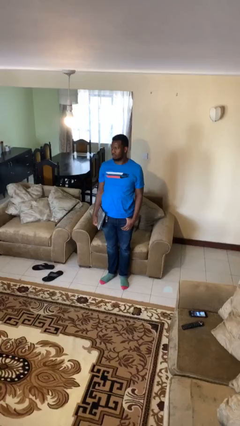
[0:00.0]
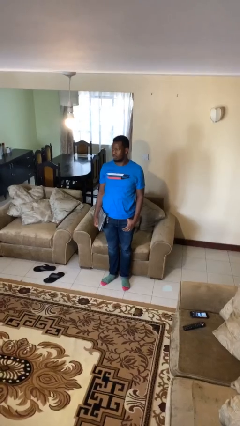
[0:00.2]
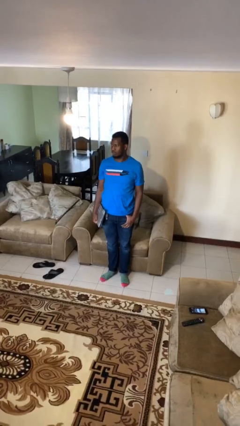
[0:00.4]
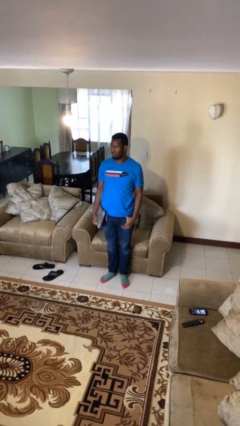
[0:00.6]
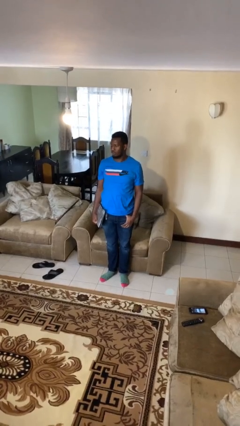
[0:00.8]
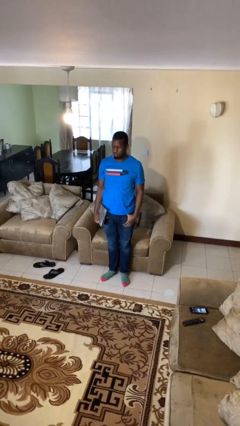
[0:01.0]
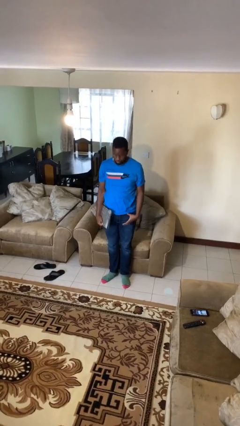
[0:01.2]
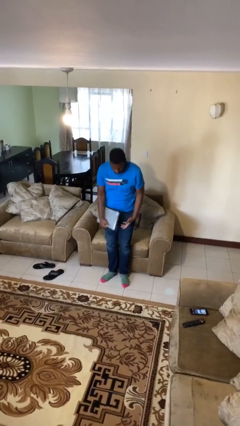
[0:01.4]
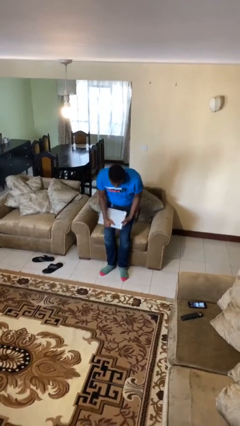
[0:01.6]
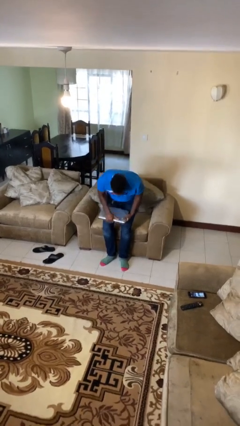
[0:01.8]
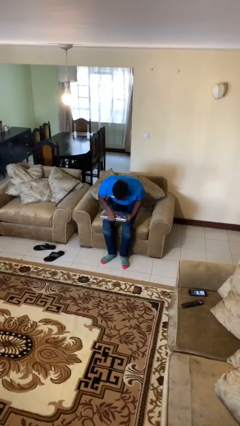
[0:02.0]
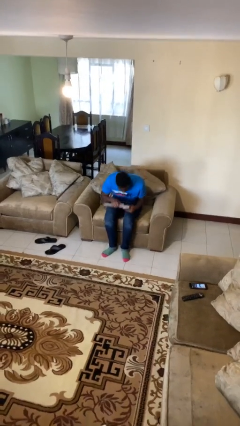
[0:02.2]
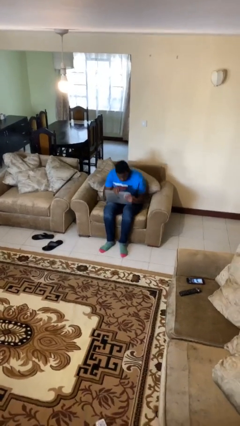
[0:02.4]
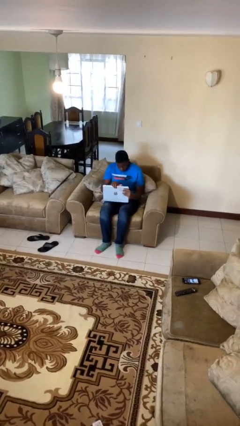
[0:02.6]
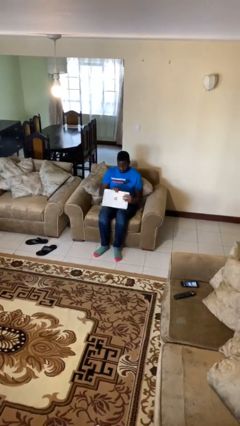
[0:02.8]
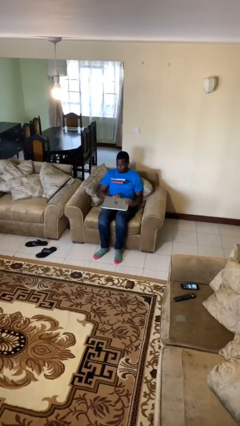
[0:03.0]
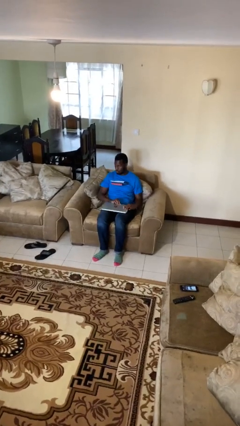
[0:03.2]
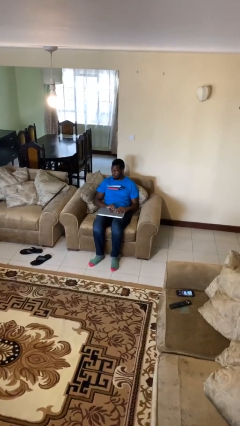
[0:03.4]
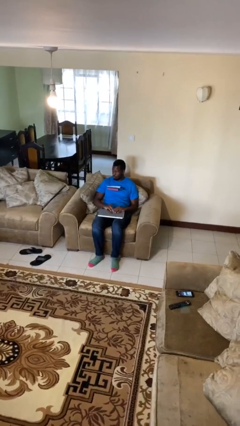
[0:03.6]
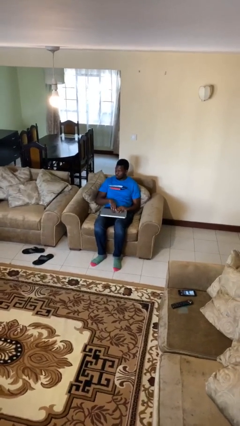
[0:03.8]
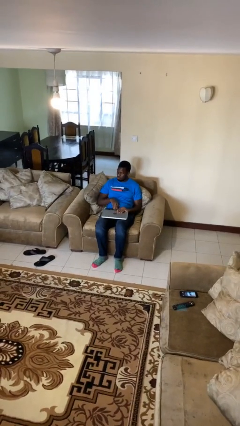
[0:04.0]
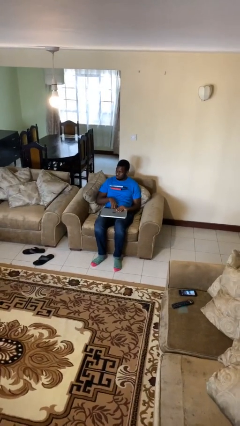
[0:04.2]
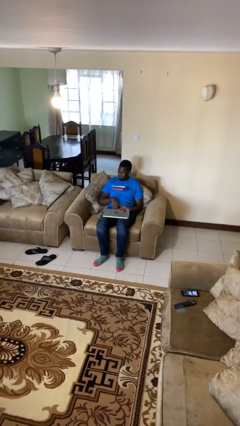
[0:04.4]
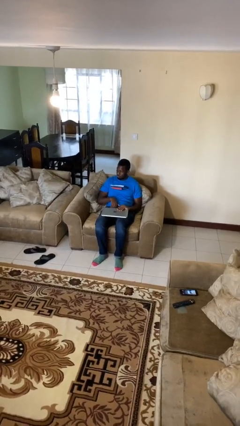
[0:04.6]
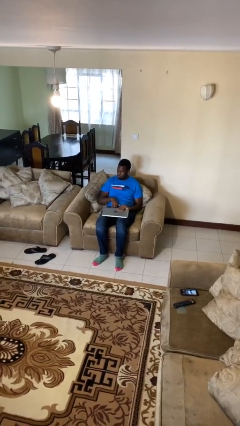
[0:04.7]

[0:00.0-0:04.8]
person sits down

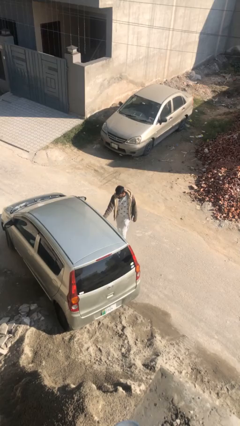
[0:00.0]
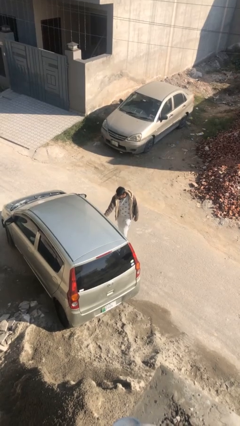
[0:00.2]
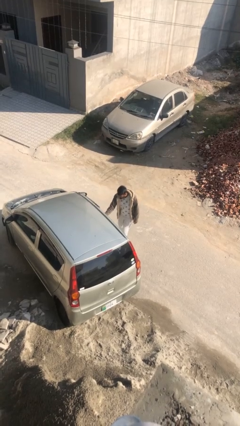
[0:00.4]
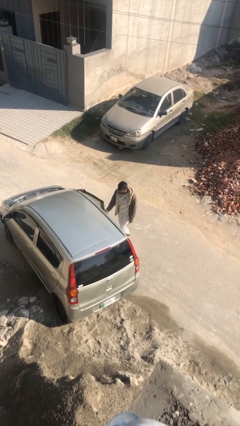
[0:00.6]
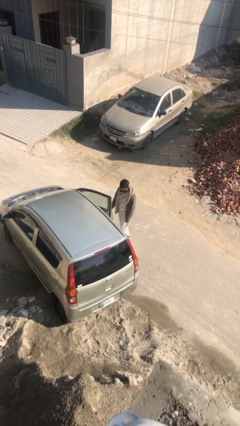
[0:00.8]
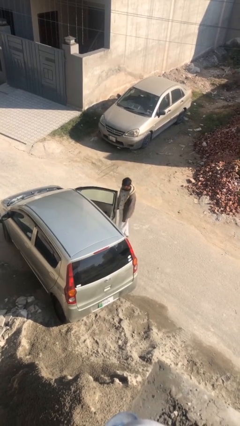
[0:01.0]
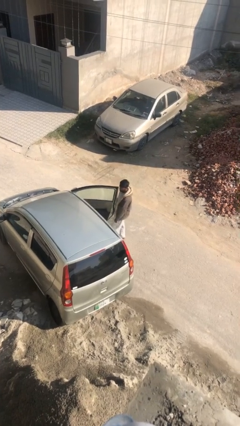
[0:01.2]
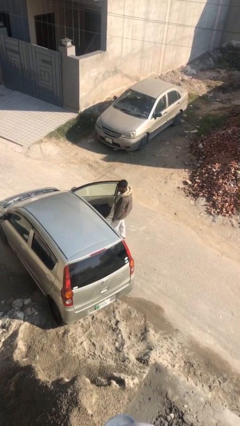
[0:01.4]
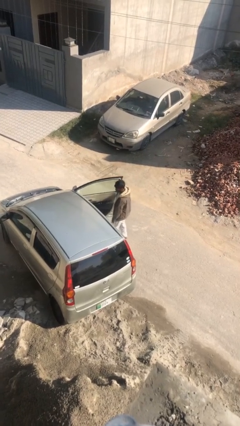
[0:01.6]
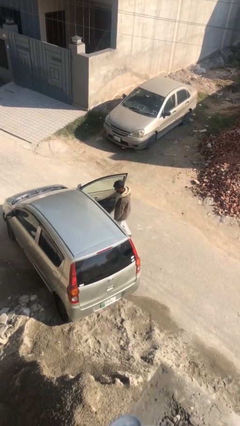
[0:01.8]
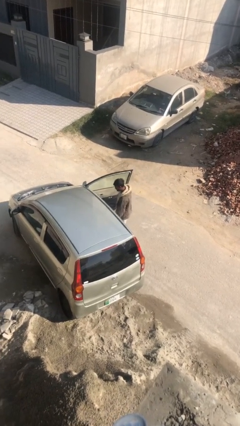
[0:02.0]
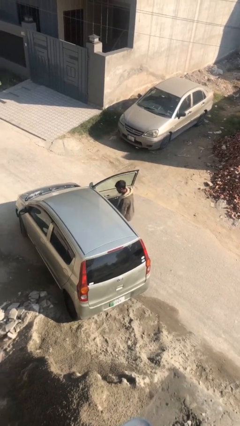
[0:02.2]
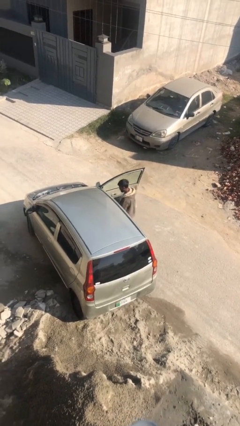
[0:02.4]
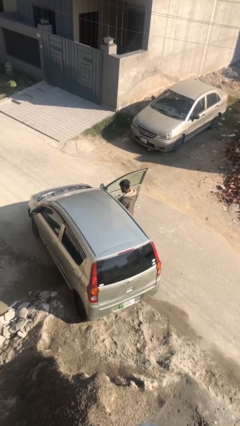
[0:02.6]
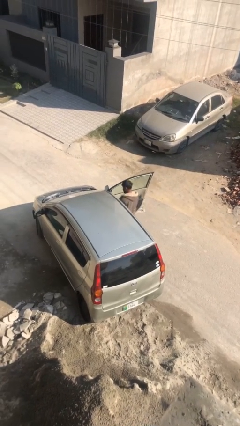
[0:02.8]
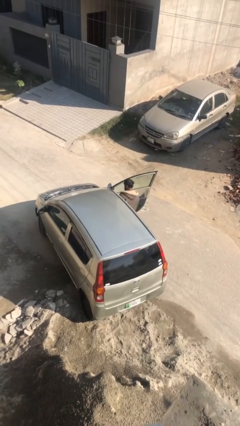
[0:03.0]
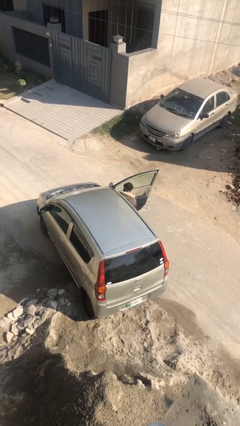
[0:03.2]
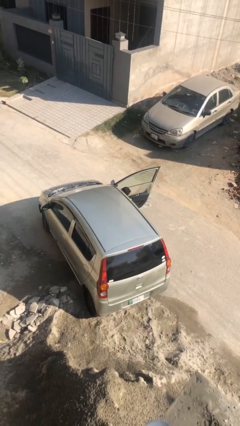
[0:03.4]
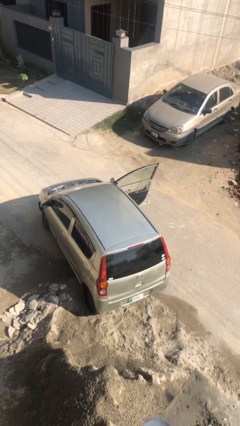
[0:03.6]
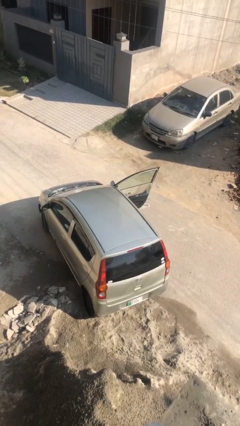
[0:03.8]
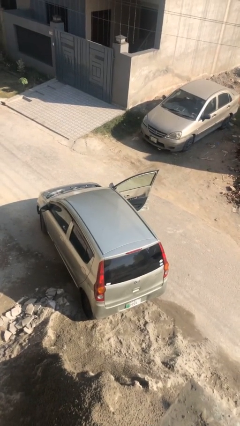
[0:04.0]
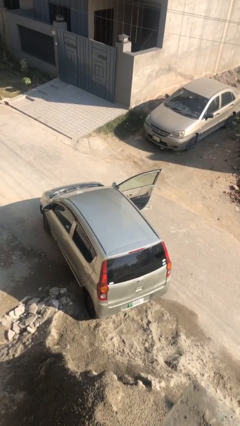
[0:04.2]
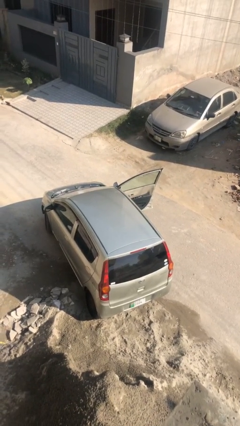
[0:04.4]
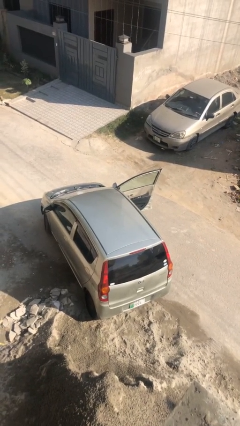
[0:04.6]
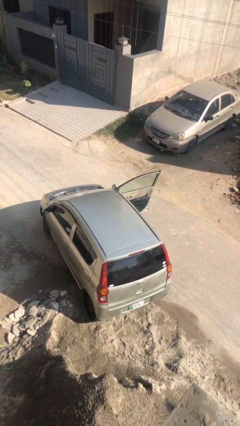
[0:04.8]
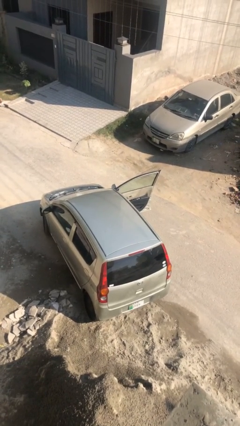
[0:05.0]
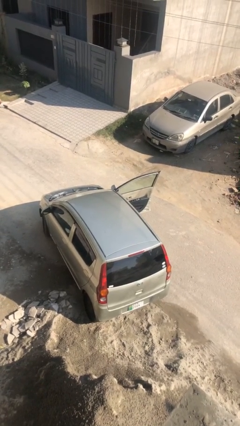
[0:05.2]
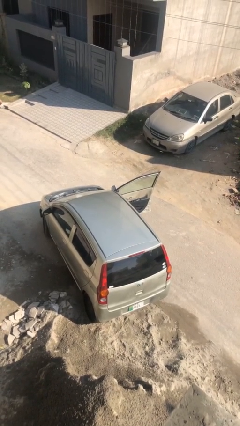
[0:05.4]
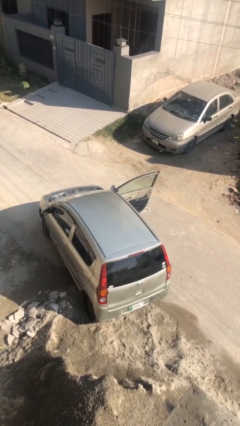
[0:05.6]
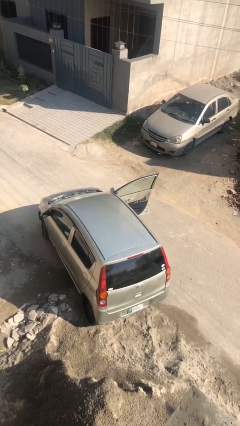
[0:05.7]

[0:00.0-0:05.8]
person enters car

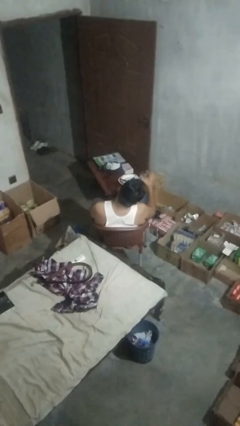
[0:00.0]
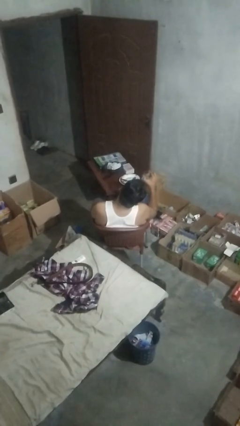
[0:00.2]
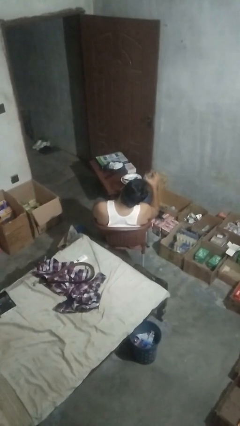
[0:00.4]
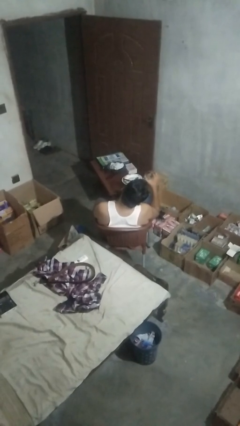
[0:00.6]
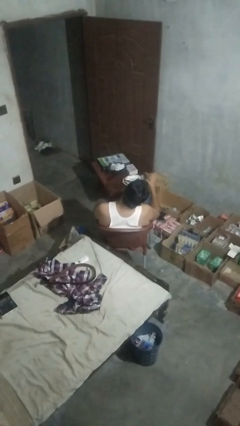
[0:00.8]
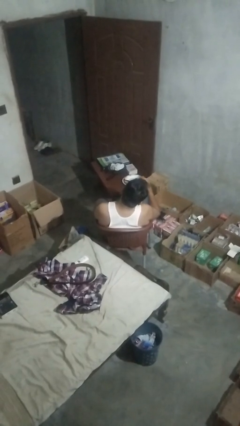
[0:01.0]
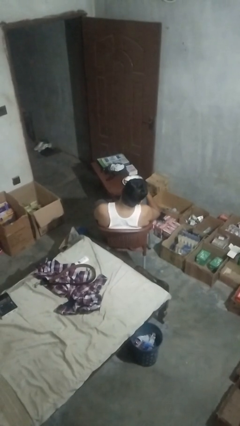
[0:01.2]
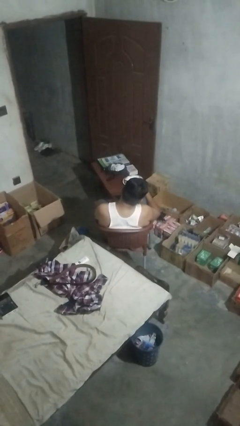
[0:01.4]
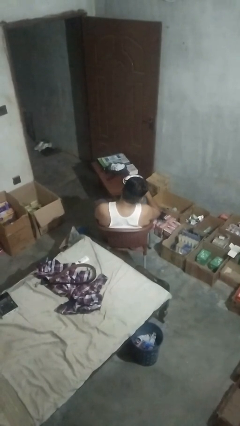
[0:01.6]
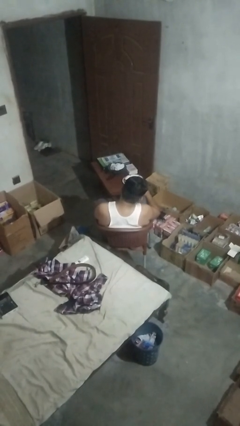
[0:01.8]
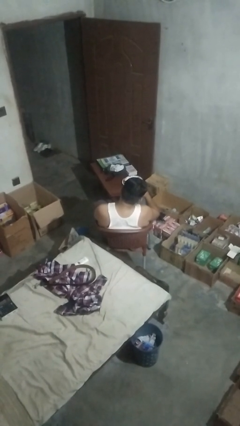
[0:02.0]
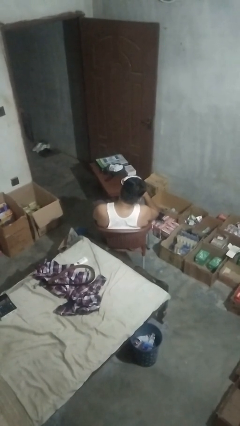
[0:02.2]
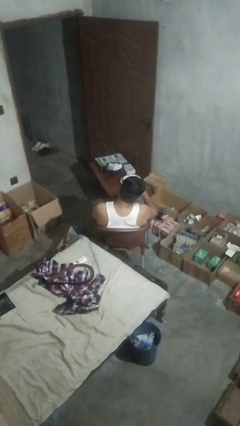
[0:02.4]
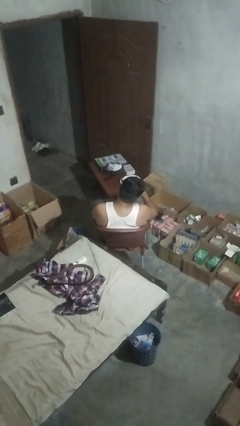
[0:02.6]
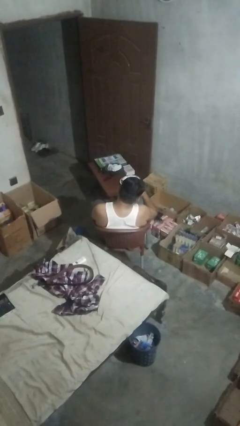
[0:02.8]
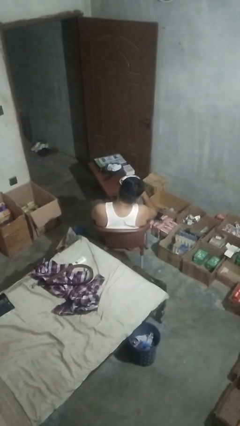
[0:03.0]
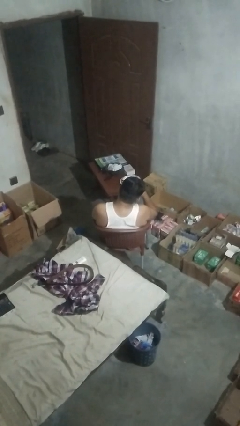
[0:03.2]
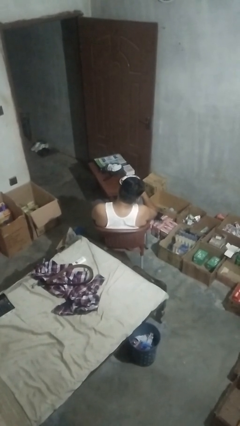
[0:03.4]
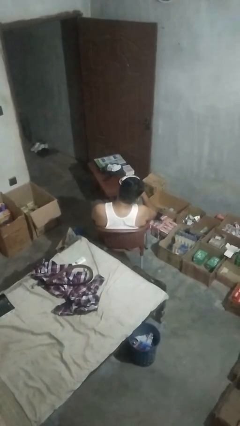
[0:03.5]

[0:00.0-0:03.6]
person drinks from shotglass

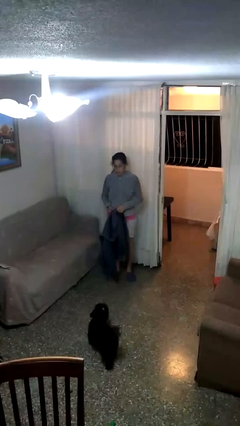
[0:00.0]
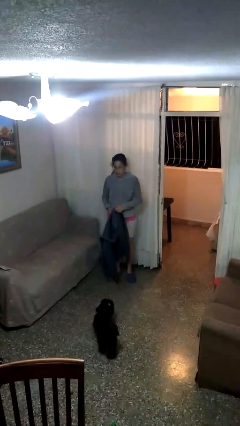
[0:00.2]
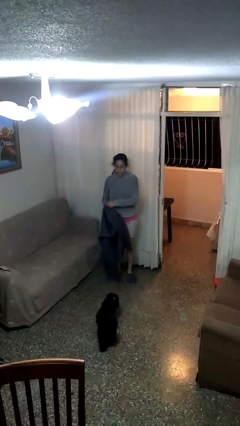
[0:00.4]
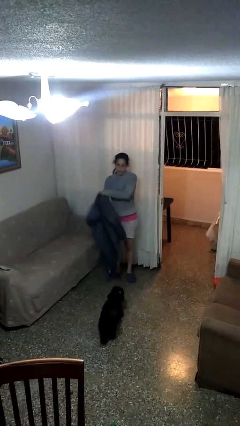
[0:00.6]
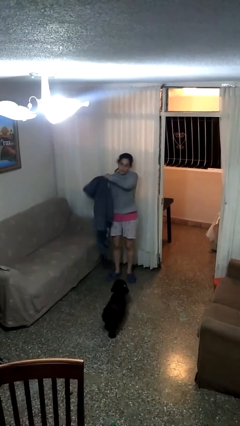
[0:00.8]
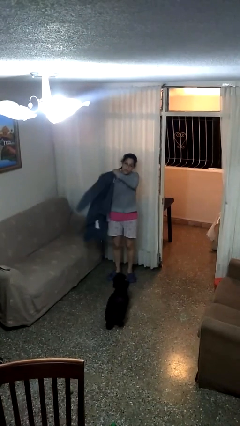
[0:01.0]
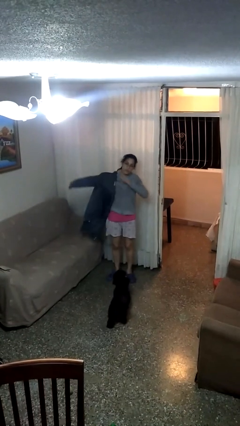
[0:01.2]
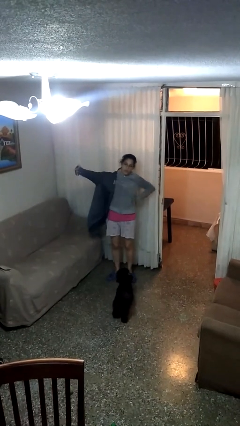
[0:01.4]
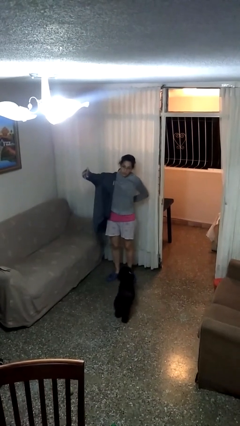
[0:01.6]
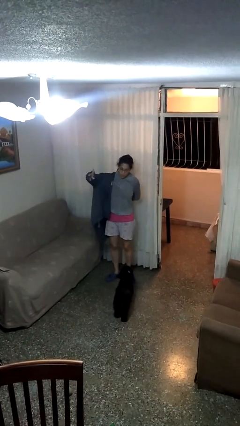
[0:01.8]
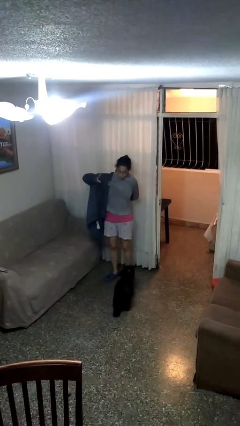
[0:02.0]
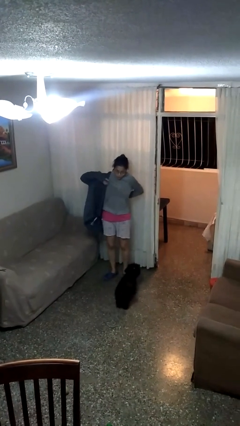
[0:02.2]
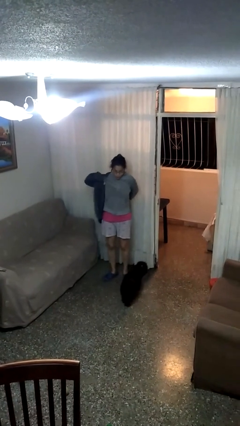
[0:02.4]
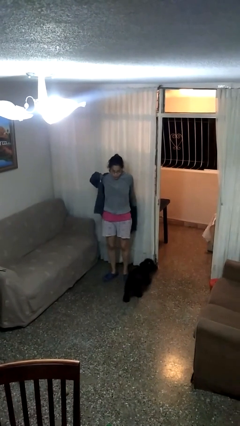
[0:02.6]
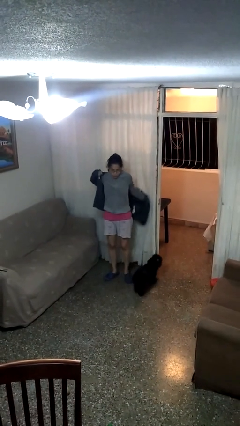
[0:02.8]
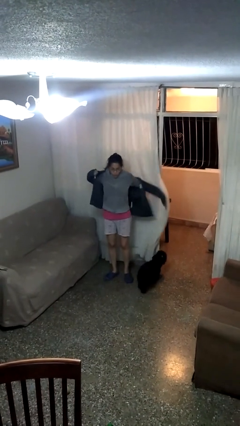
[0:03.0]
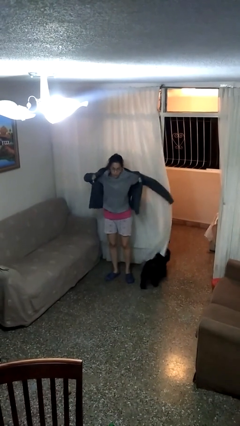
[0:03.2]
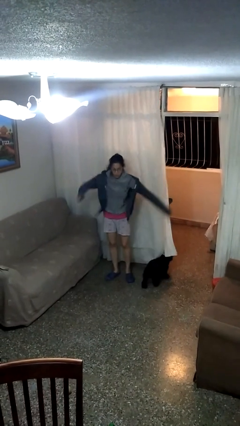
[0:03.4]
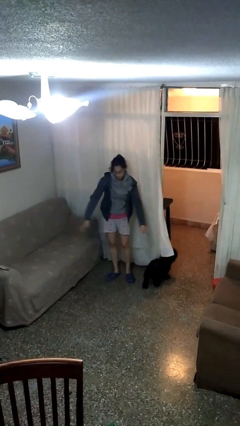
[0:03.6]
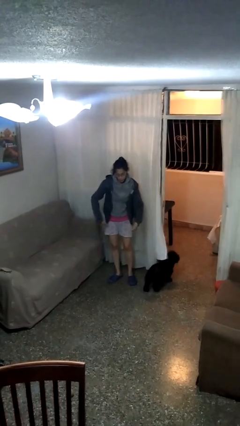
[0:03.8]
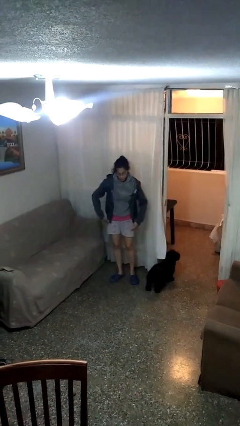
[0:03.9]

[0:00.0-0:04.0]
person puts on jacket
